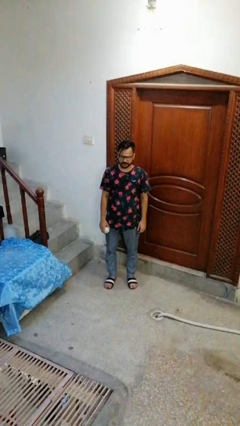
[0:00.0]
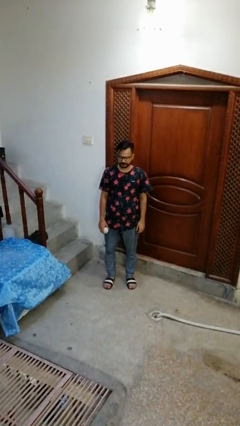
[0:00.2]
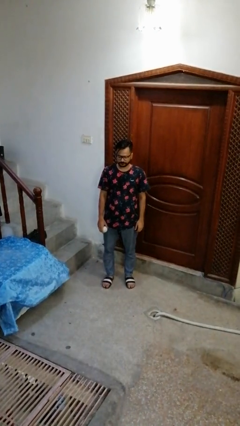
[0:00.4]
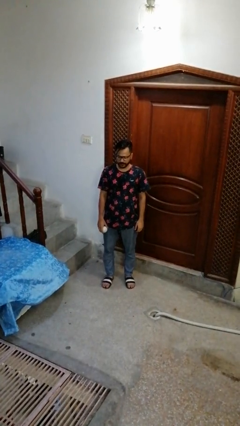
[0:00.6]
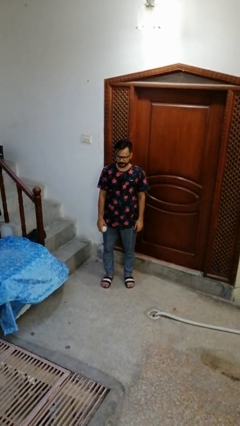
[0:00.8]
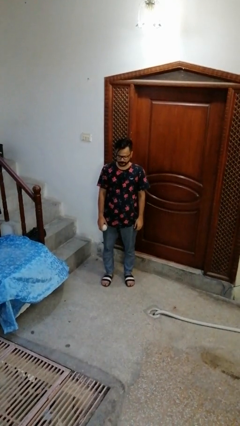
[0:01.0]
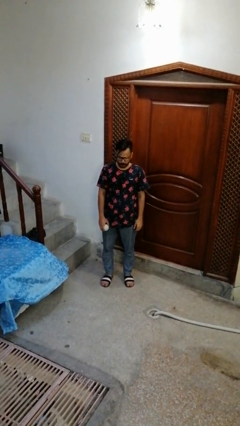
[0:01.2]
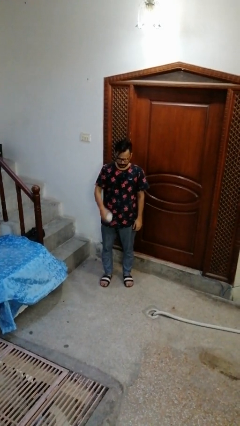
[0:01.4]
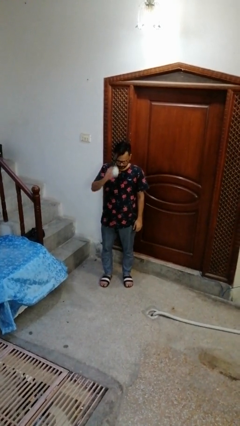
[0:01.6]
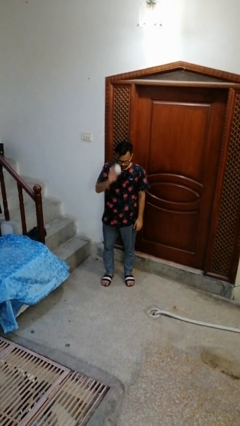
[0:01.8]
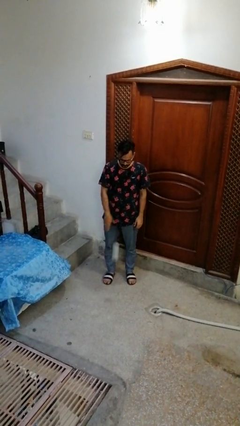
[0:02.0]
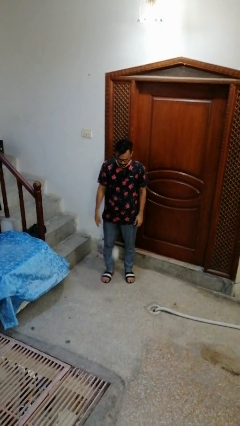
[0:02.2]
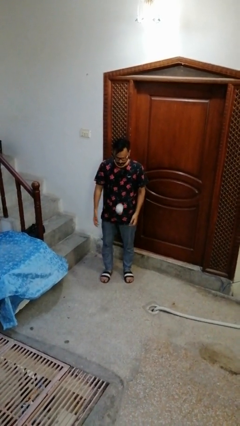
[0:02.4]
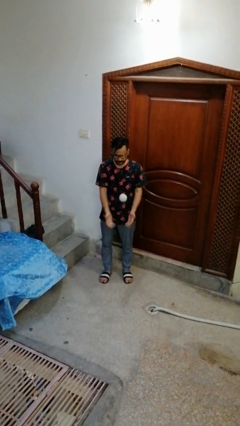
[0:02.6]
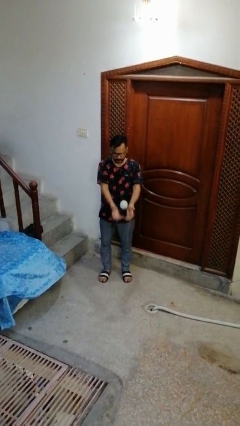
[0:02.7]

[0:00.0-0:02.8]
person bounces ball on floor

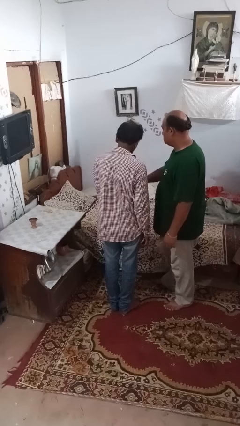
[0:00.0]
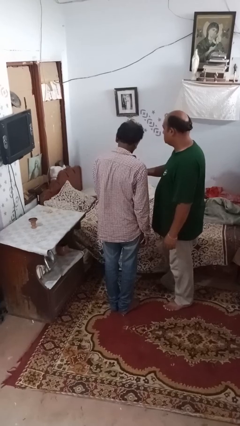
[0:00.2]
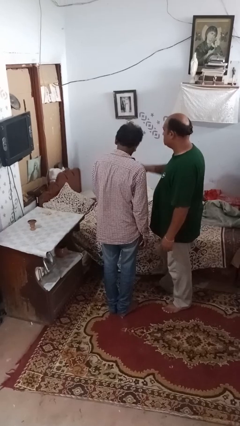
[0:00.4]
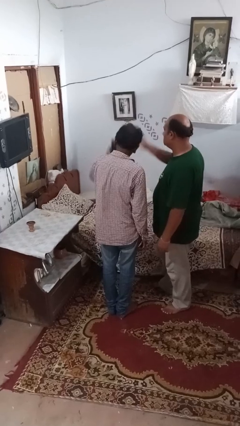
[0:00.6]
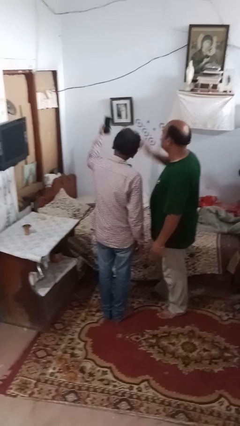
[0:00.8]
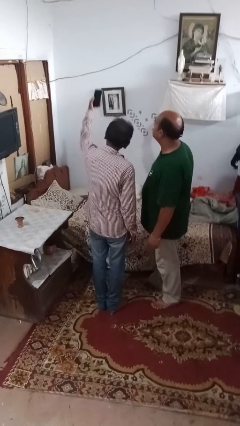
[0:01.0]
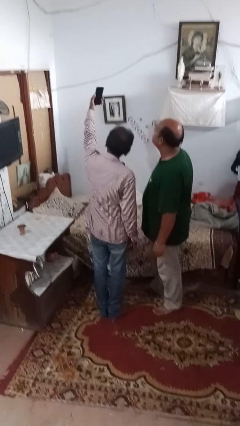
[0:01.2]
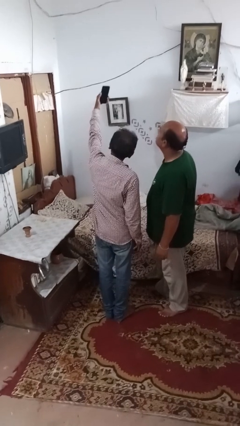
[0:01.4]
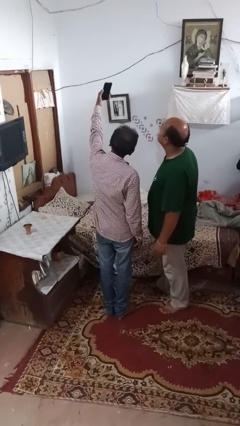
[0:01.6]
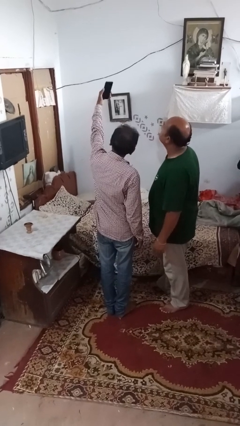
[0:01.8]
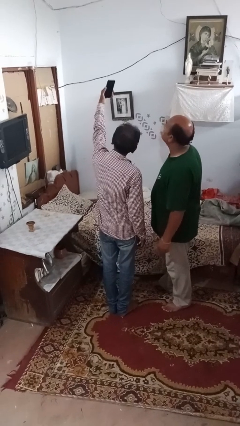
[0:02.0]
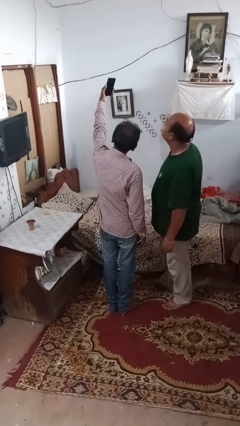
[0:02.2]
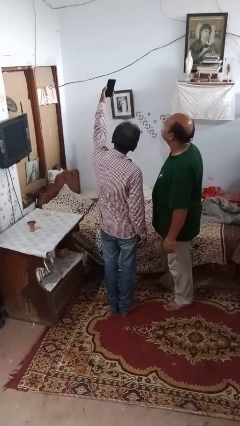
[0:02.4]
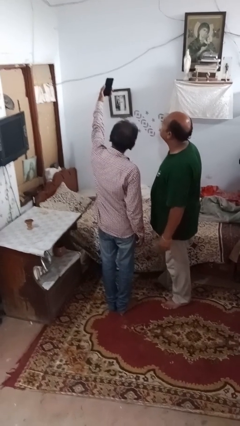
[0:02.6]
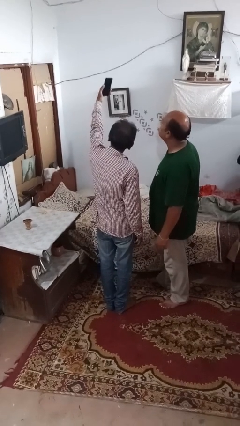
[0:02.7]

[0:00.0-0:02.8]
person takes selfie with person

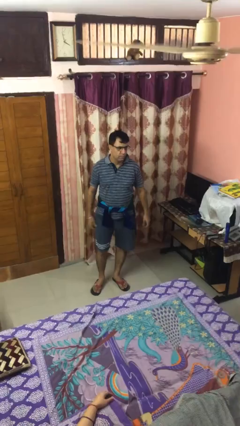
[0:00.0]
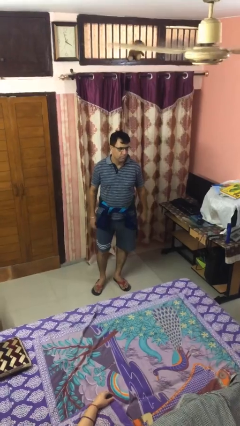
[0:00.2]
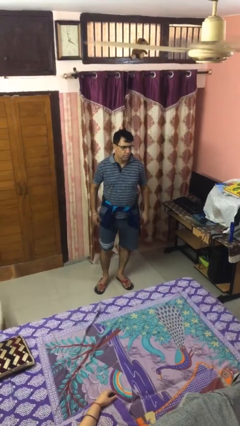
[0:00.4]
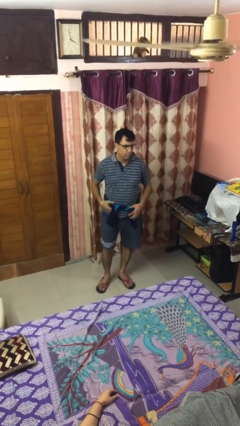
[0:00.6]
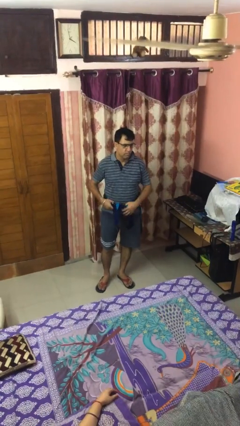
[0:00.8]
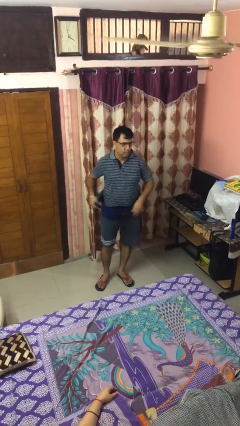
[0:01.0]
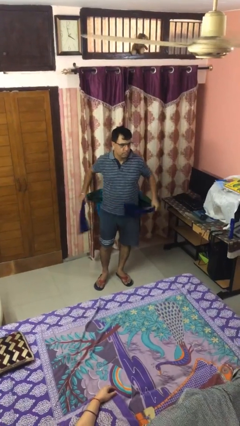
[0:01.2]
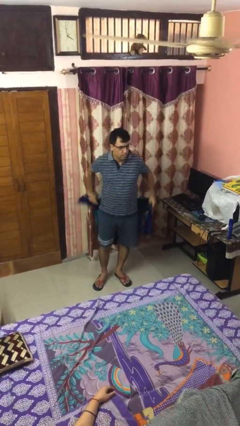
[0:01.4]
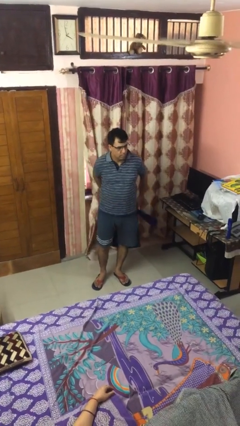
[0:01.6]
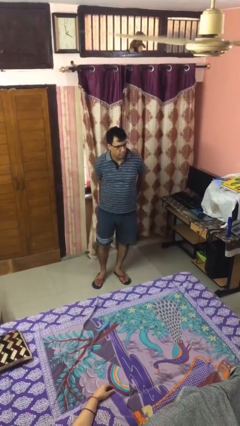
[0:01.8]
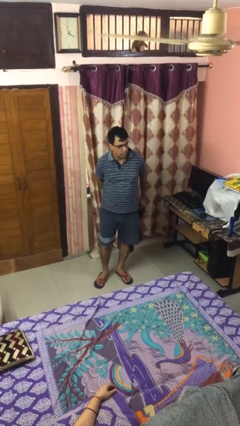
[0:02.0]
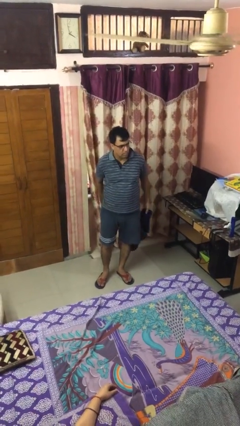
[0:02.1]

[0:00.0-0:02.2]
person unties jacket around waist

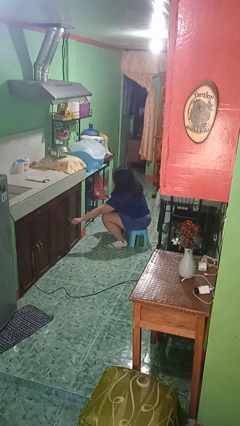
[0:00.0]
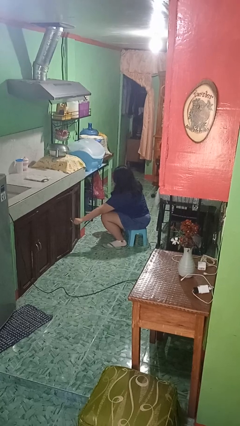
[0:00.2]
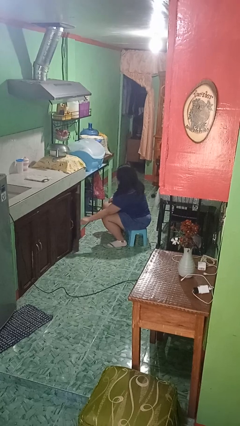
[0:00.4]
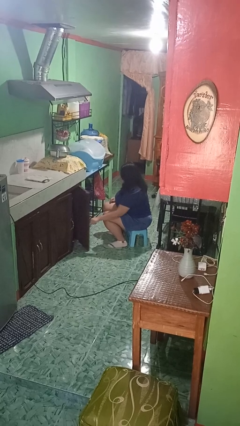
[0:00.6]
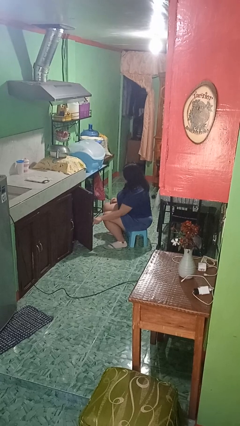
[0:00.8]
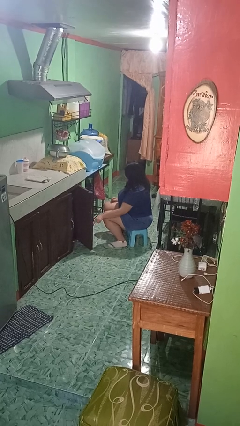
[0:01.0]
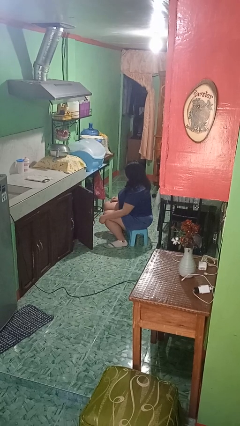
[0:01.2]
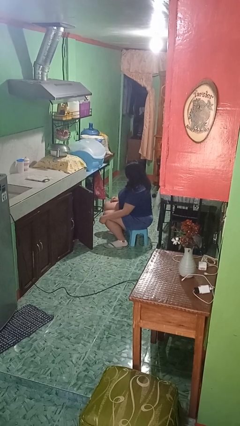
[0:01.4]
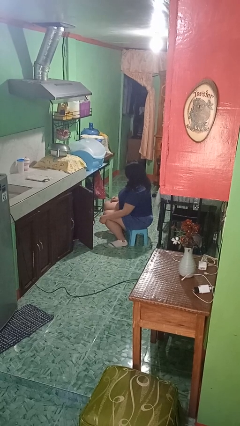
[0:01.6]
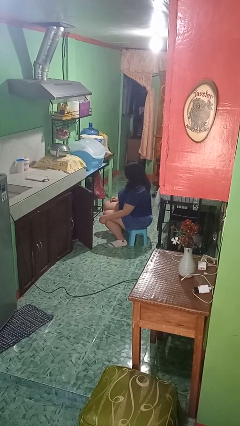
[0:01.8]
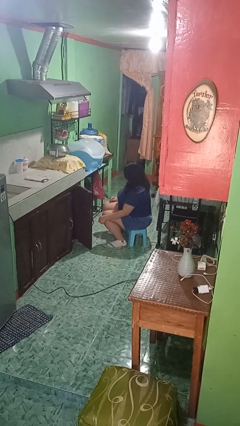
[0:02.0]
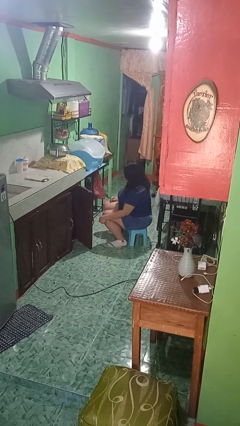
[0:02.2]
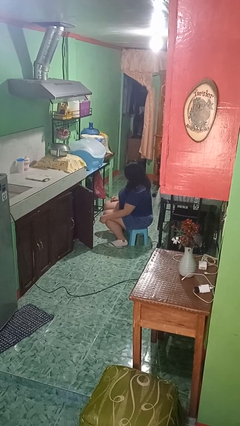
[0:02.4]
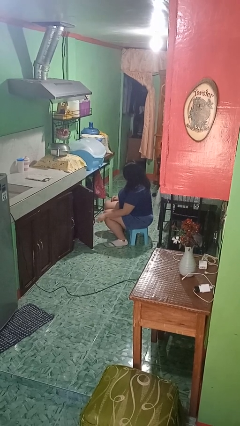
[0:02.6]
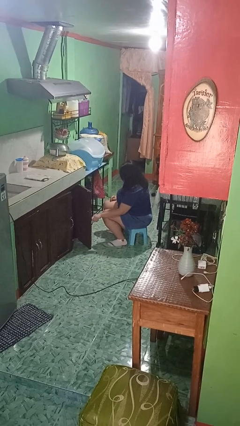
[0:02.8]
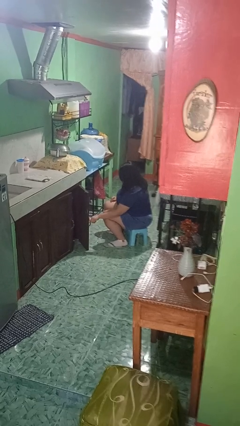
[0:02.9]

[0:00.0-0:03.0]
person opens cabinet

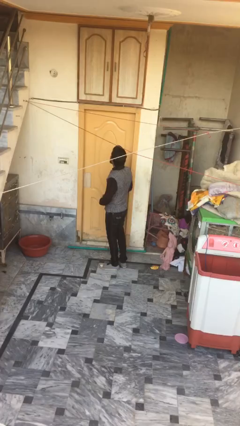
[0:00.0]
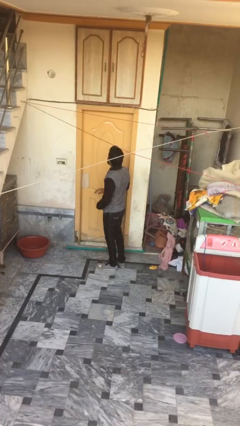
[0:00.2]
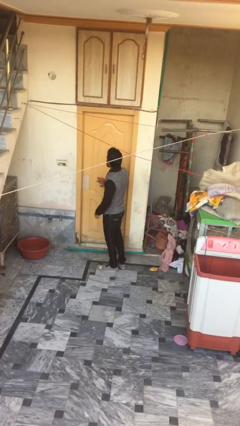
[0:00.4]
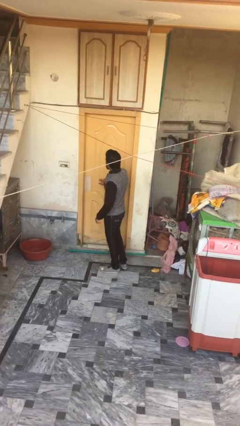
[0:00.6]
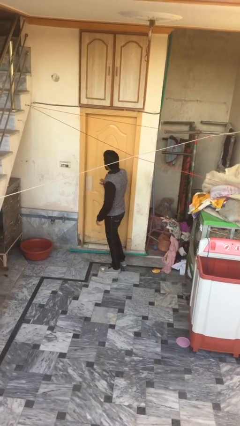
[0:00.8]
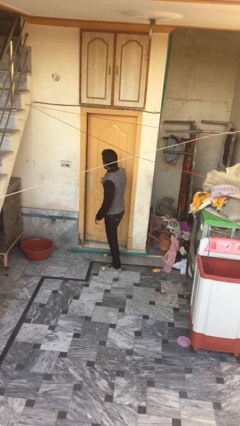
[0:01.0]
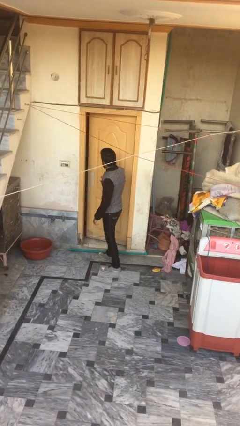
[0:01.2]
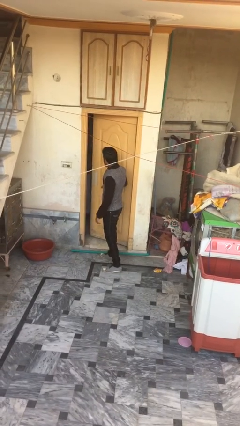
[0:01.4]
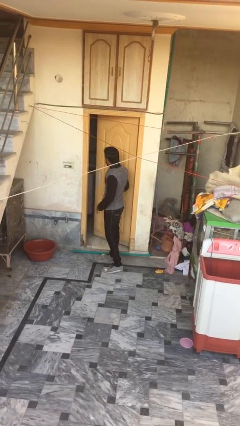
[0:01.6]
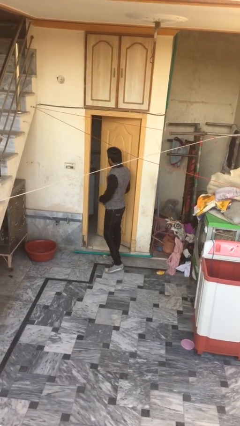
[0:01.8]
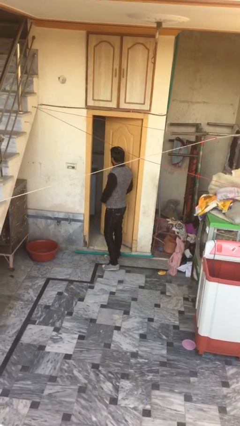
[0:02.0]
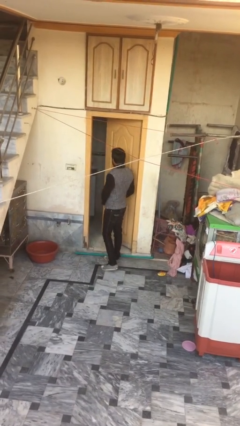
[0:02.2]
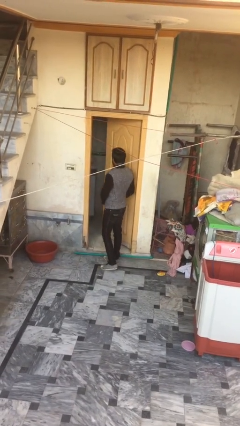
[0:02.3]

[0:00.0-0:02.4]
person opens facility door

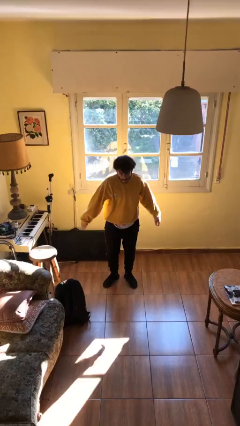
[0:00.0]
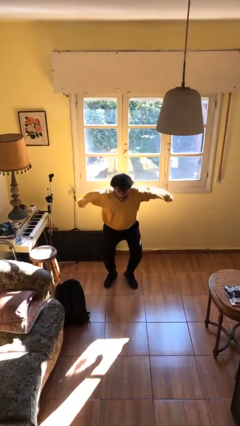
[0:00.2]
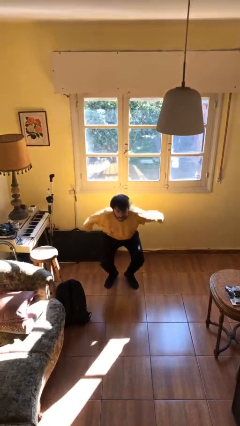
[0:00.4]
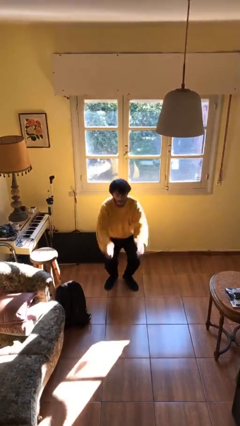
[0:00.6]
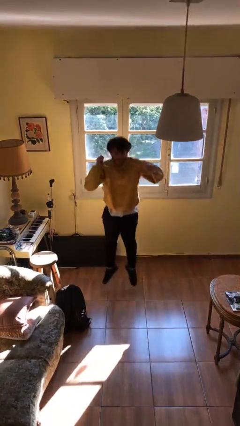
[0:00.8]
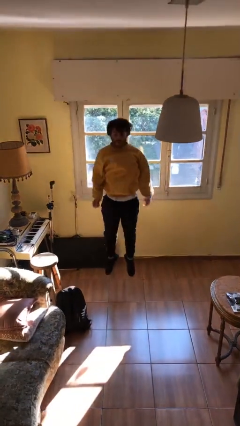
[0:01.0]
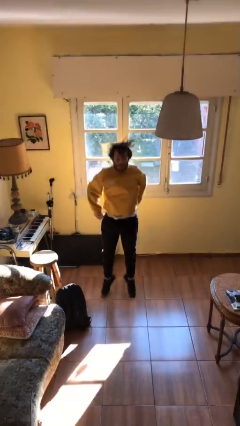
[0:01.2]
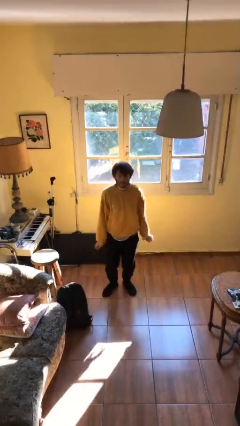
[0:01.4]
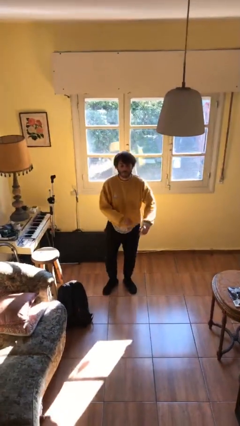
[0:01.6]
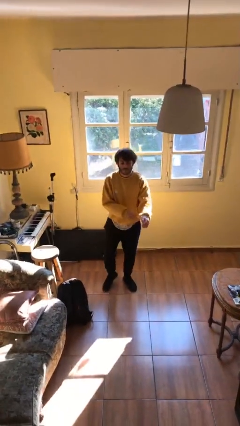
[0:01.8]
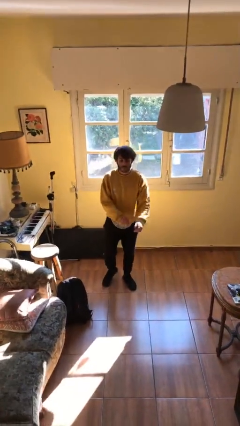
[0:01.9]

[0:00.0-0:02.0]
person jumps

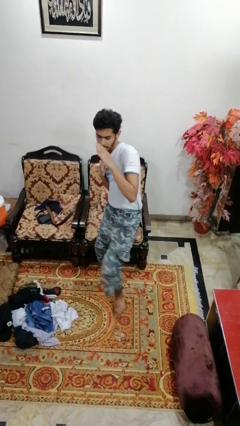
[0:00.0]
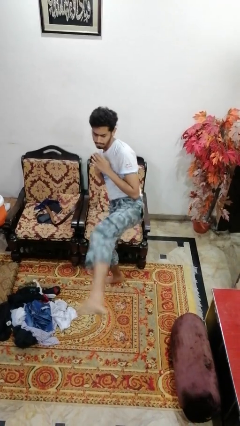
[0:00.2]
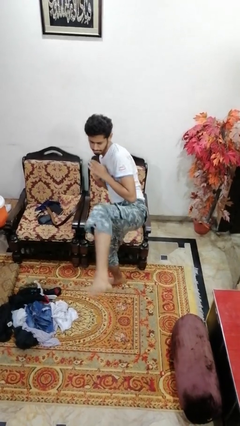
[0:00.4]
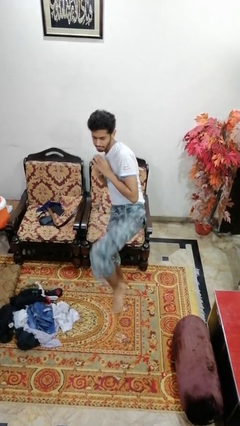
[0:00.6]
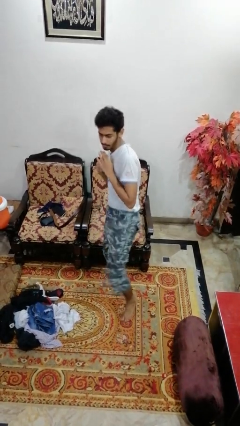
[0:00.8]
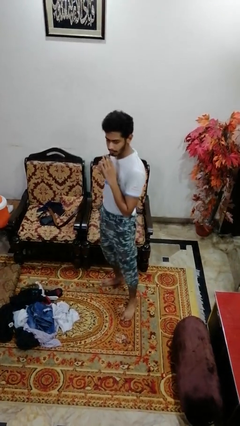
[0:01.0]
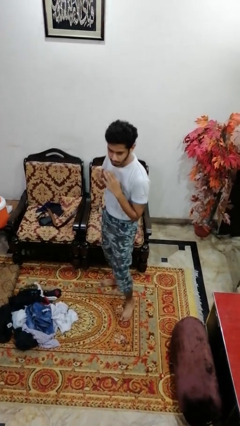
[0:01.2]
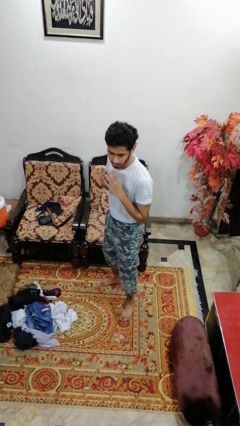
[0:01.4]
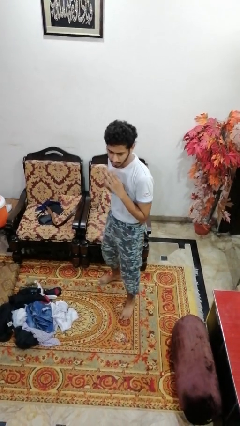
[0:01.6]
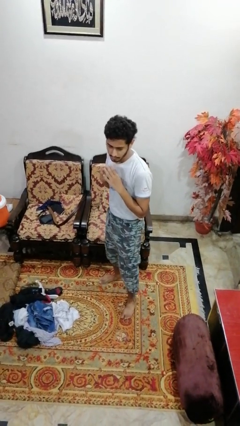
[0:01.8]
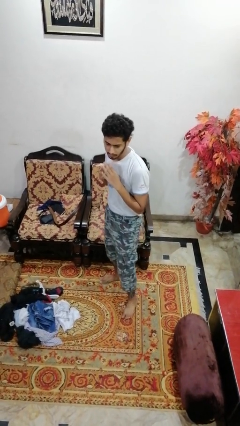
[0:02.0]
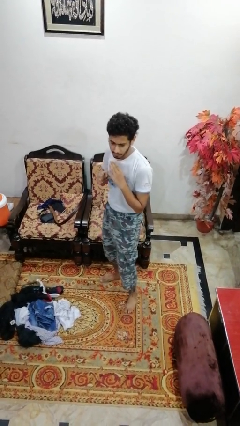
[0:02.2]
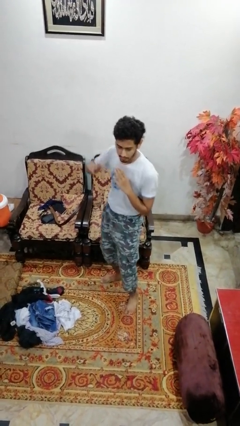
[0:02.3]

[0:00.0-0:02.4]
person karate kicks
